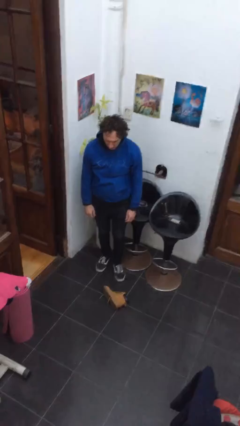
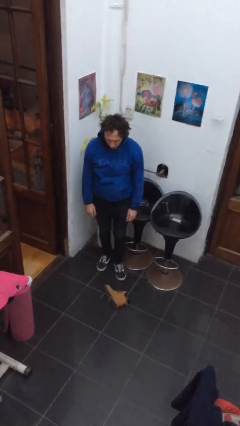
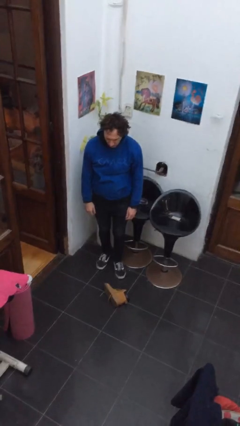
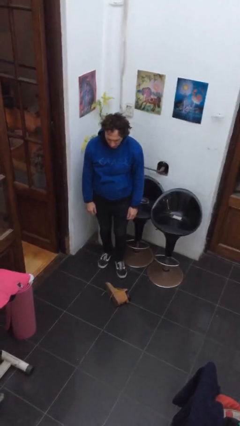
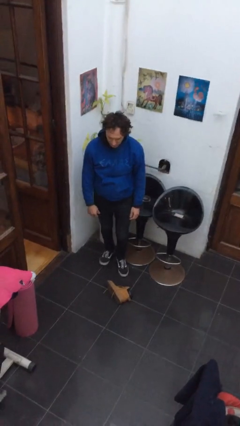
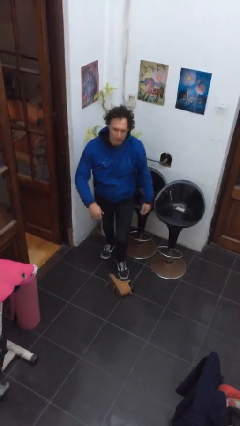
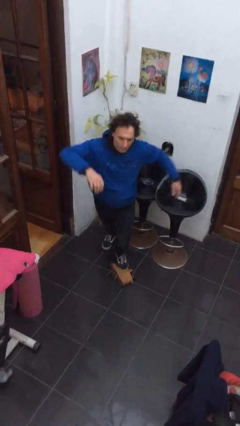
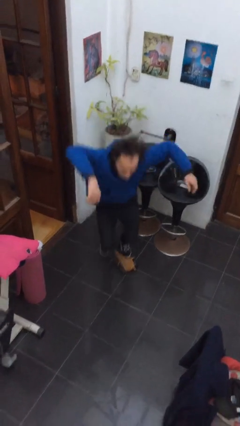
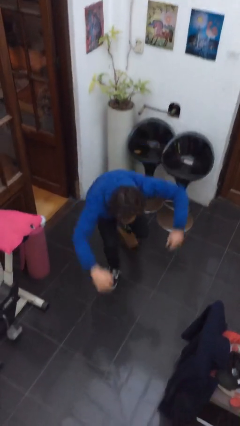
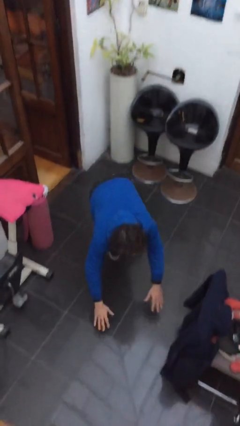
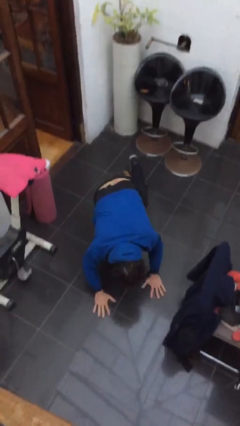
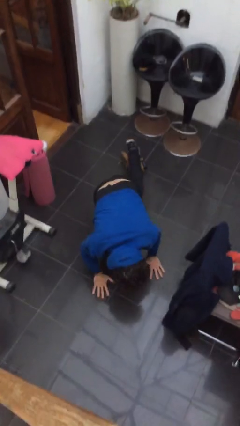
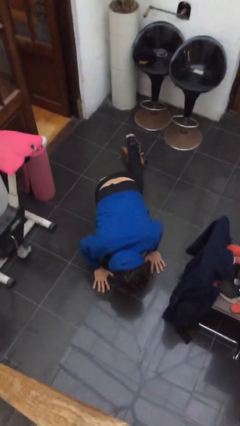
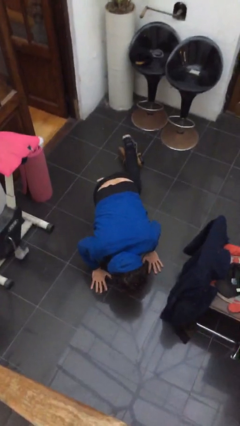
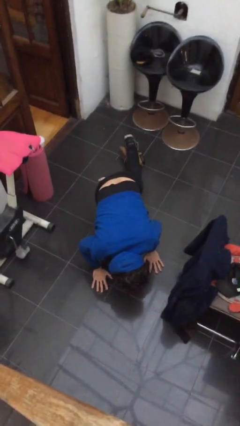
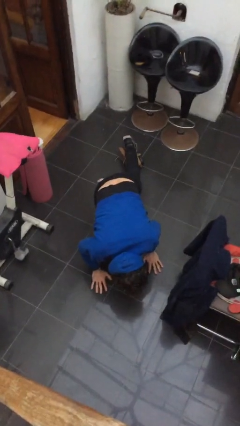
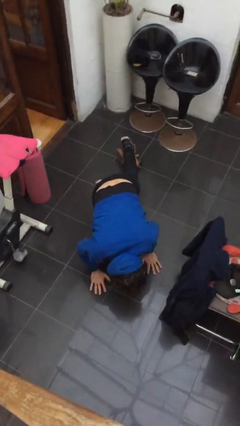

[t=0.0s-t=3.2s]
person trips on object on floor

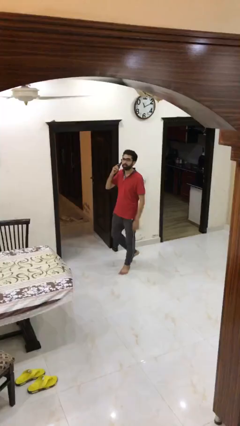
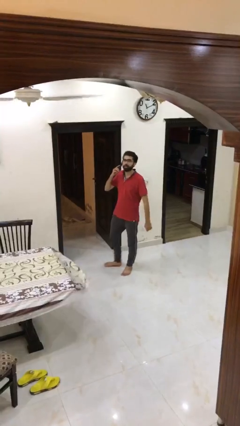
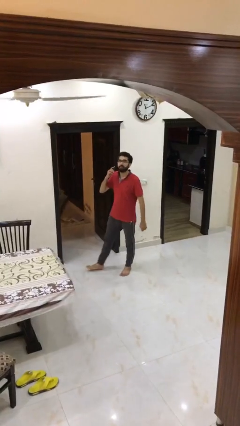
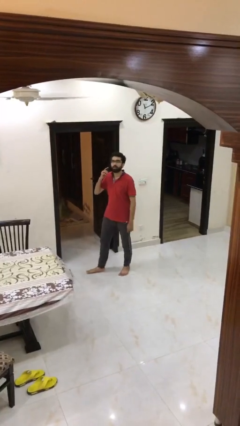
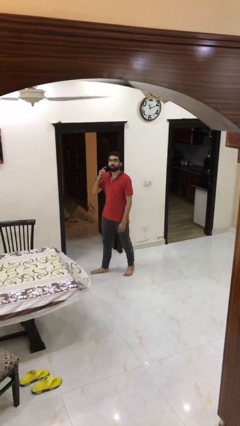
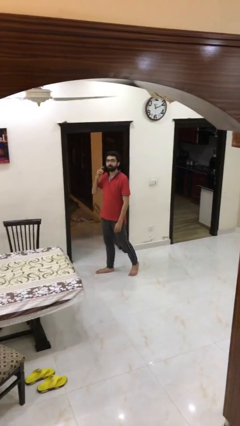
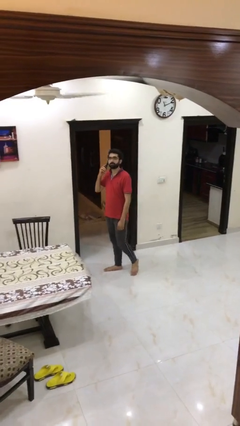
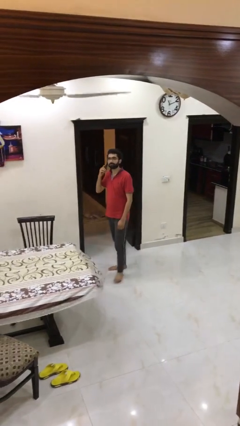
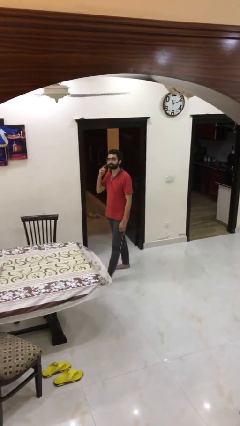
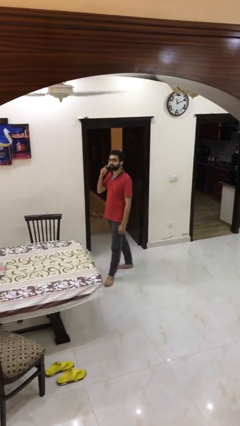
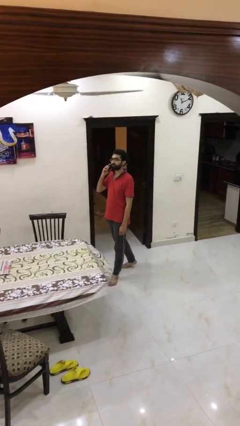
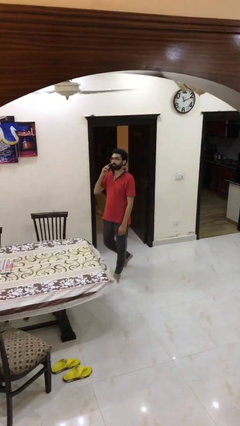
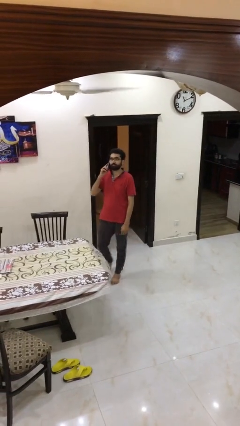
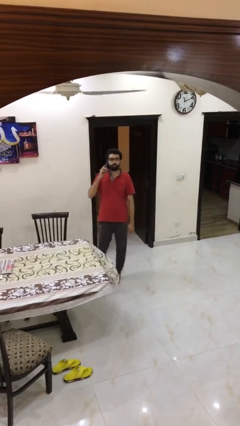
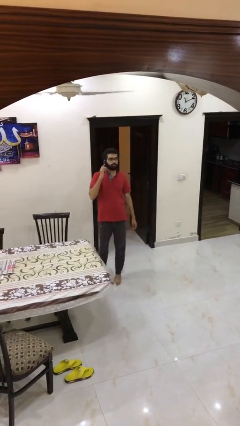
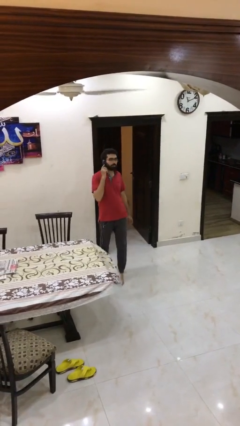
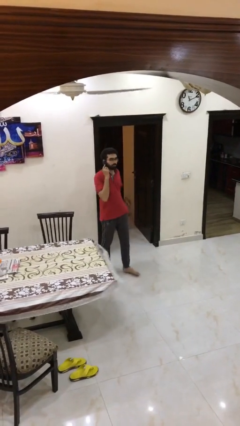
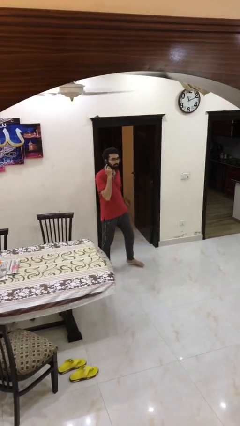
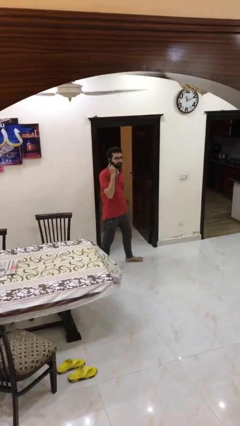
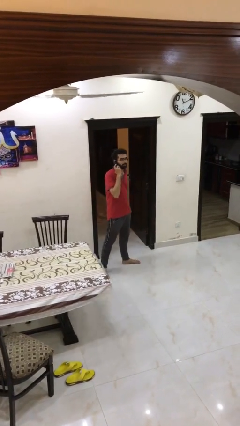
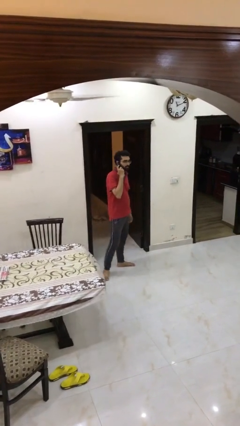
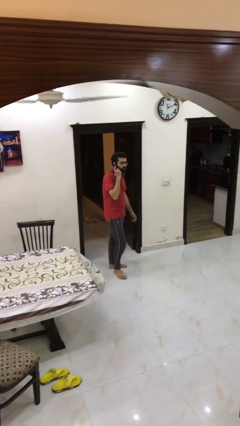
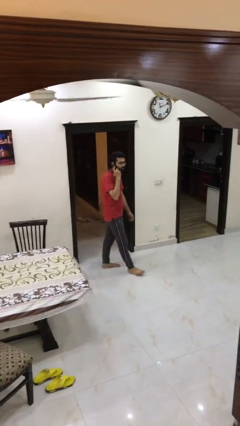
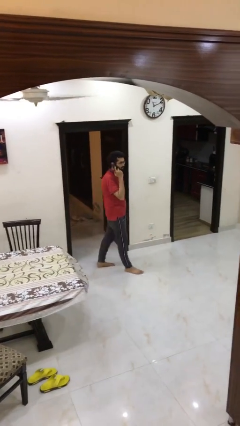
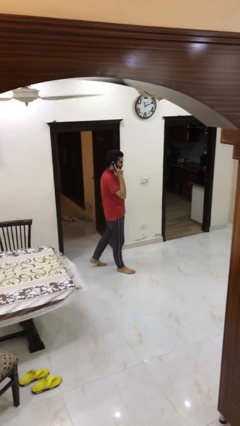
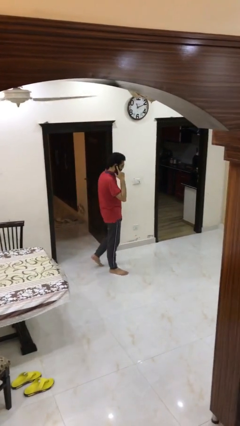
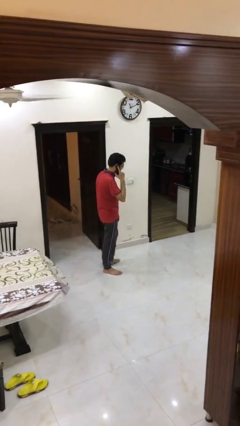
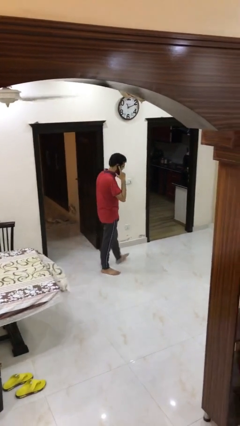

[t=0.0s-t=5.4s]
person talks on phone

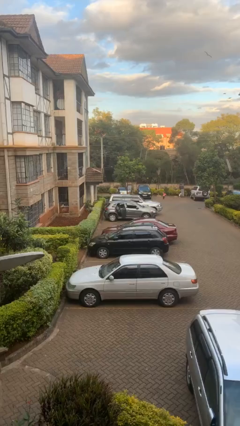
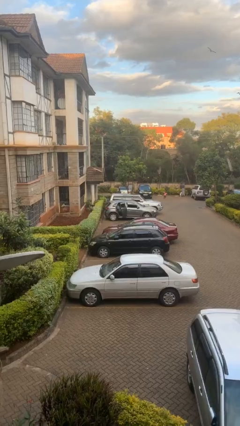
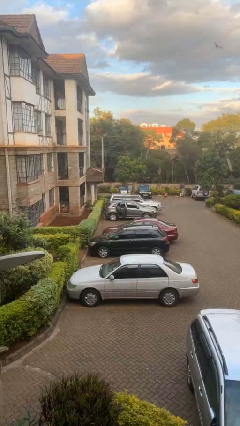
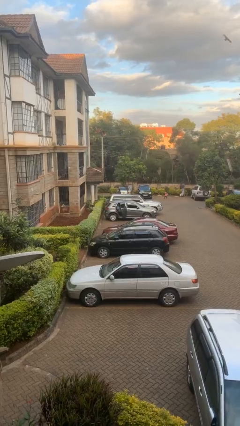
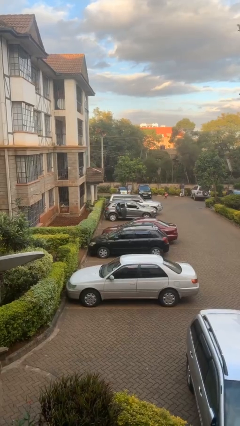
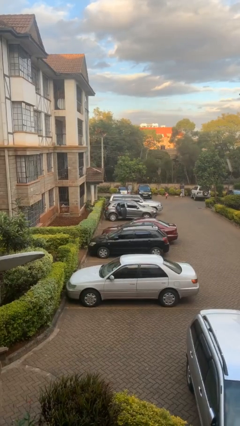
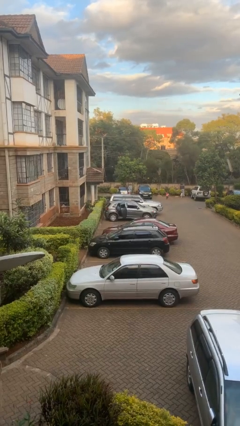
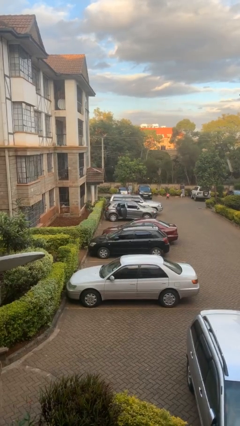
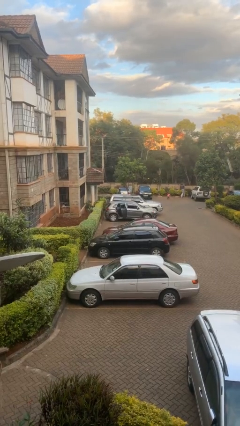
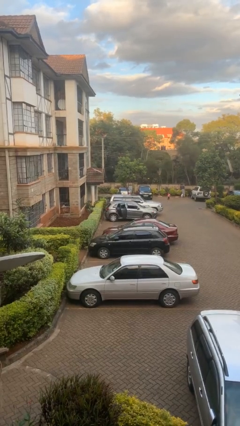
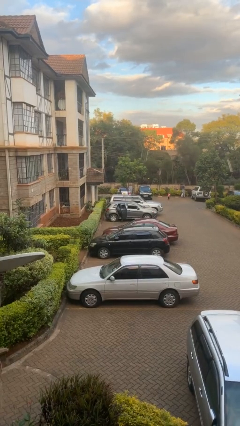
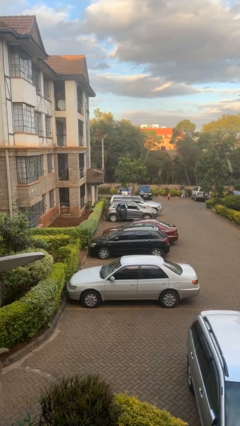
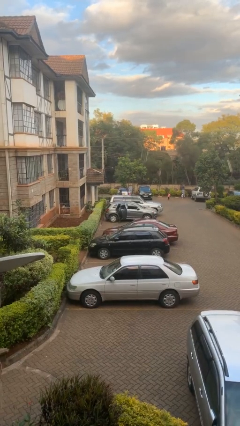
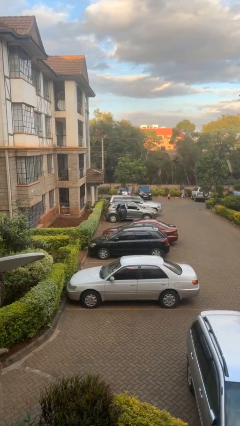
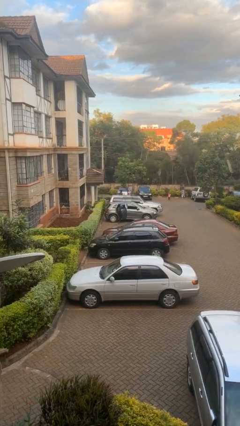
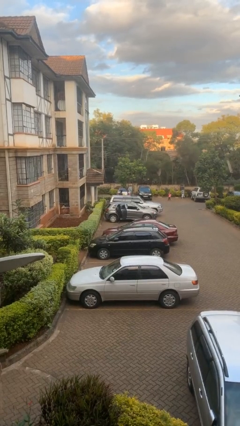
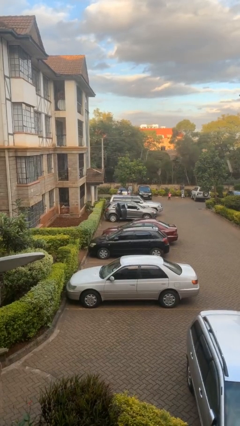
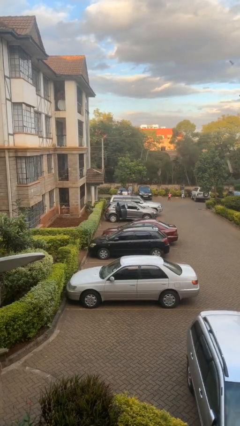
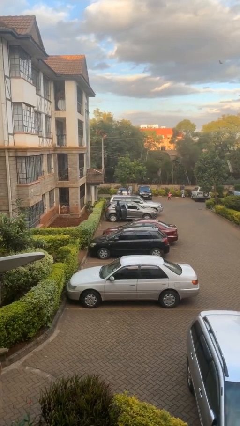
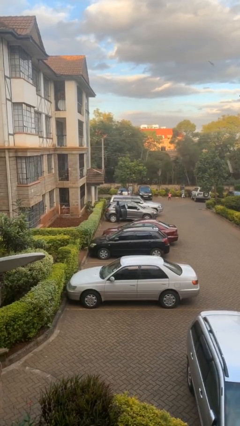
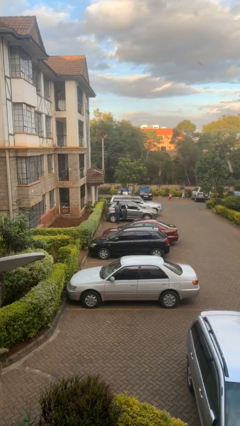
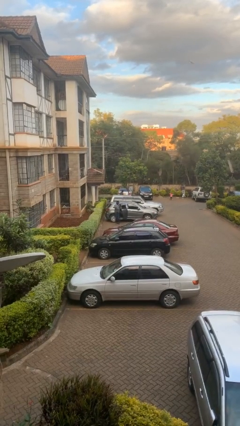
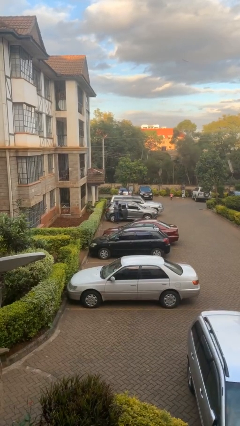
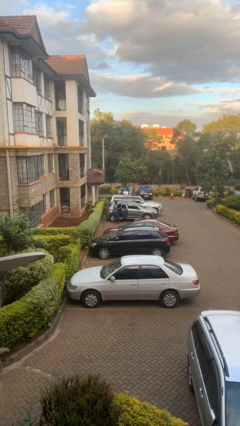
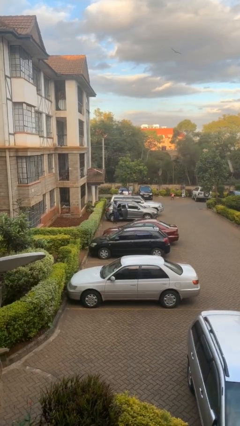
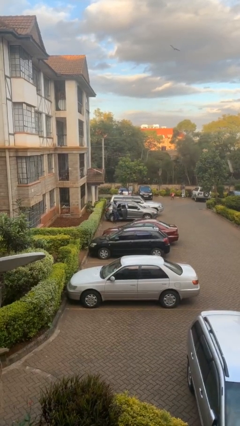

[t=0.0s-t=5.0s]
person exits car

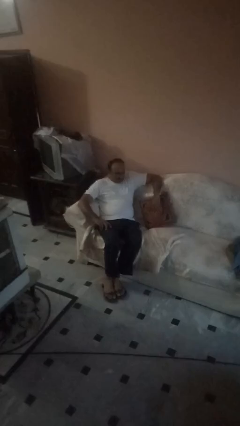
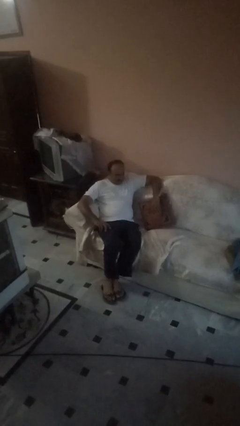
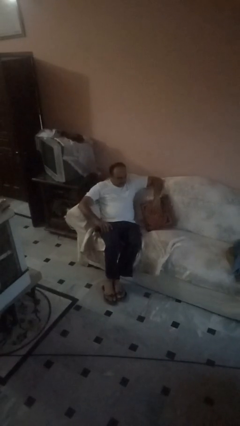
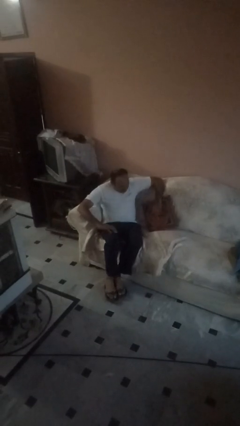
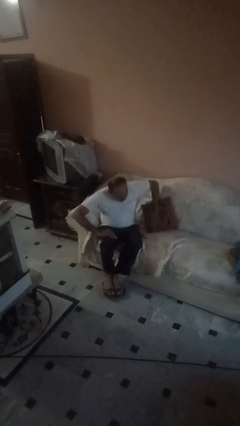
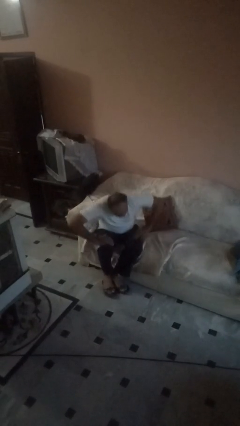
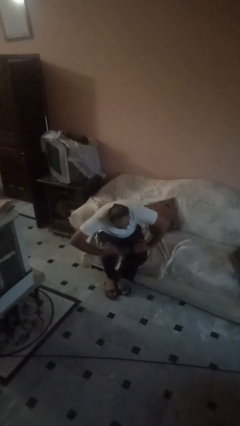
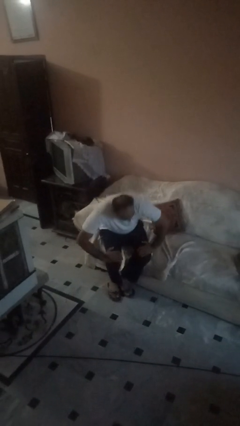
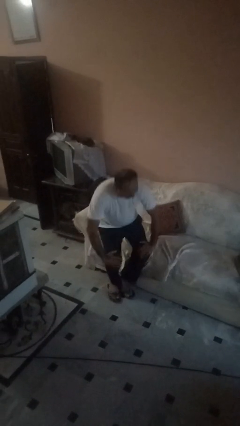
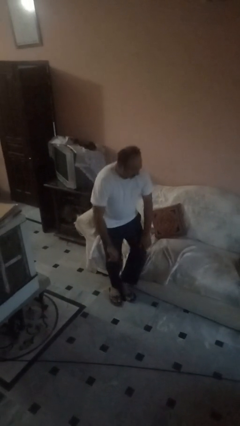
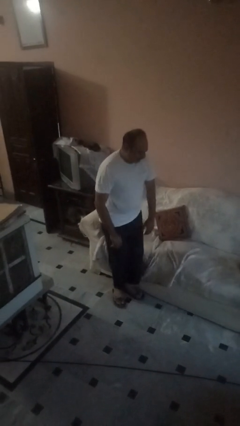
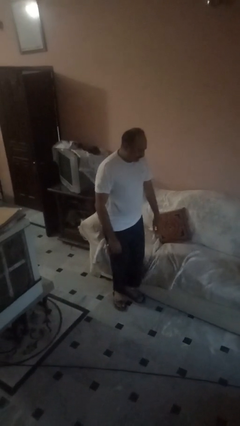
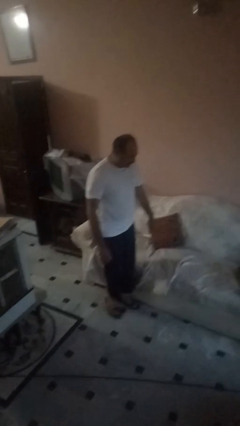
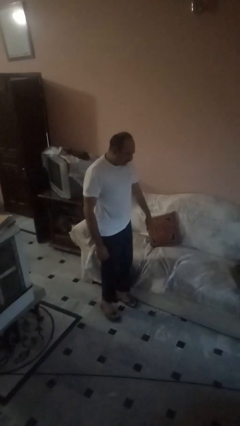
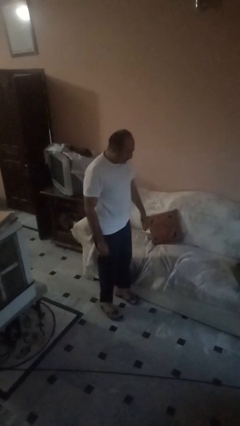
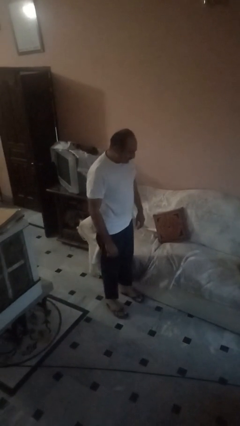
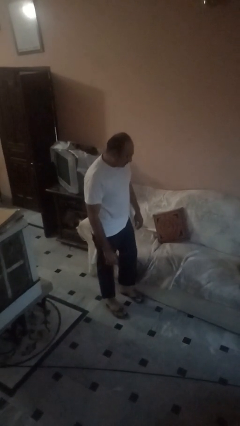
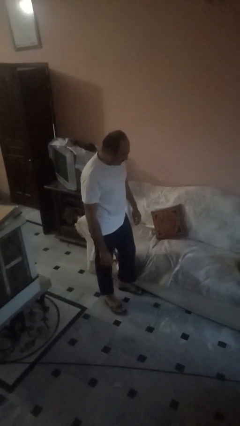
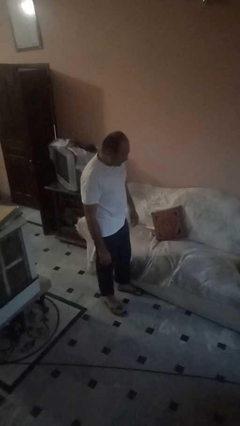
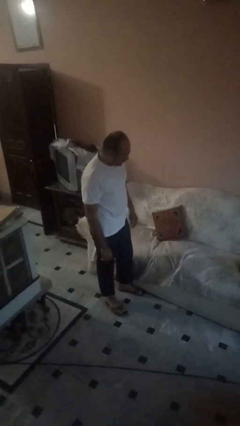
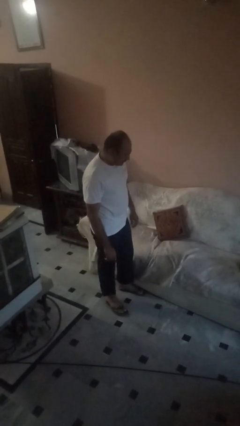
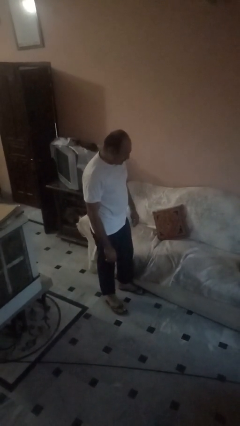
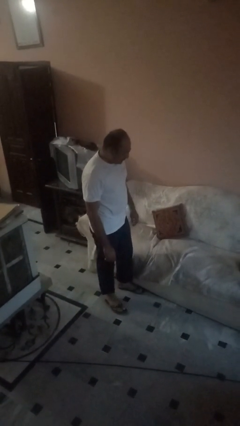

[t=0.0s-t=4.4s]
person stands up
